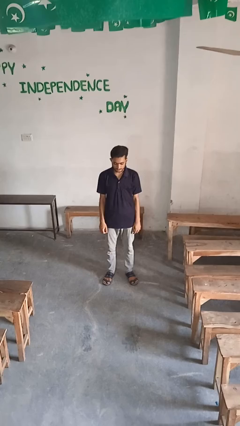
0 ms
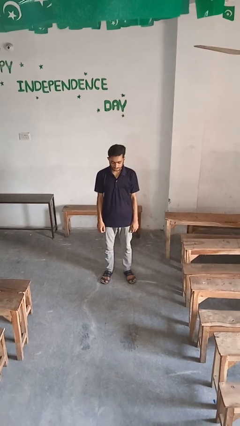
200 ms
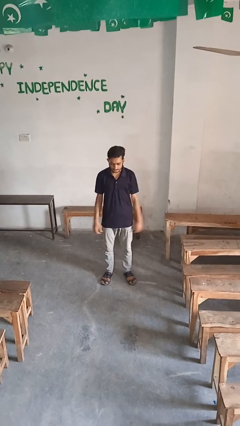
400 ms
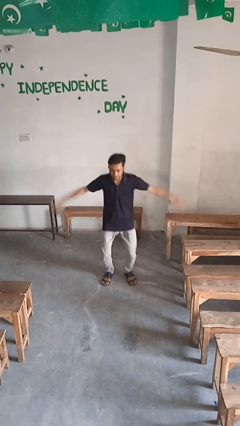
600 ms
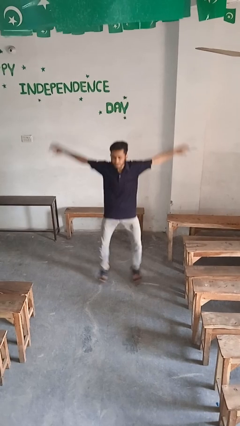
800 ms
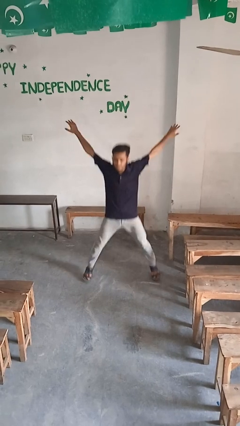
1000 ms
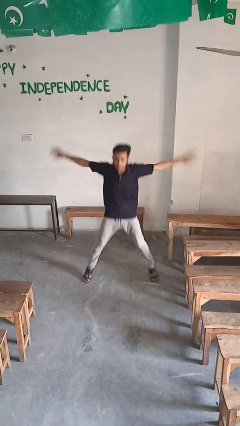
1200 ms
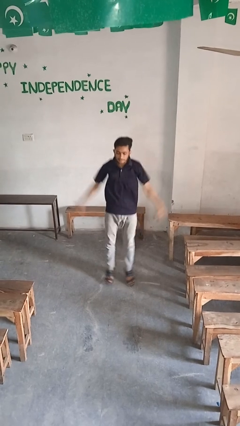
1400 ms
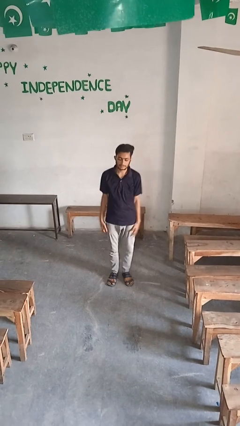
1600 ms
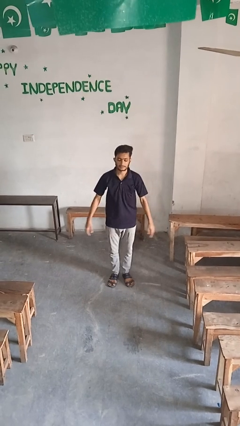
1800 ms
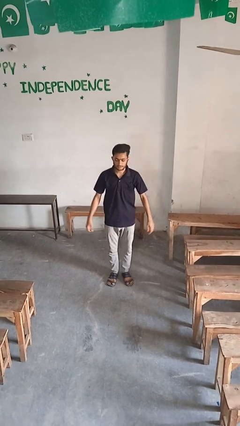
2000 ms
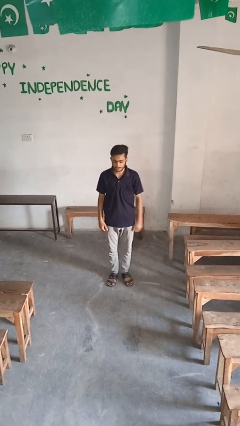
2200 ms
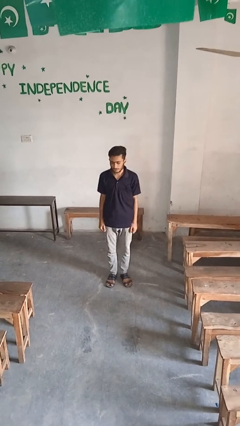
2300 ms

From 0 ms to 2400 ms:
person exercises with jumping jacks

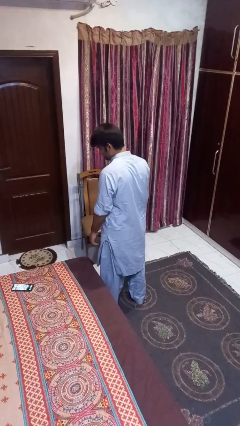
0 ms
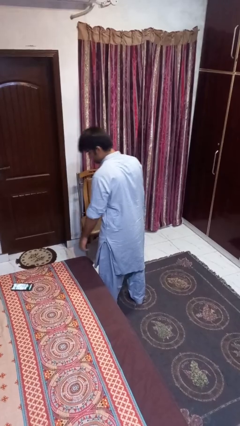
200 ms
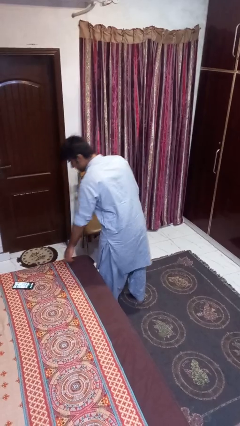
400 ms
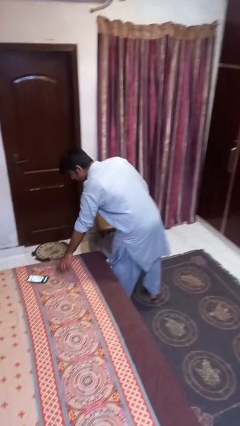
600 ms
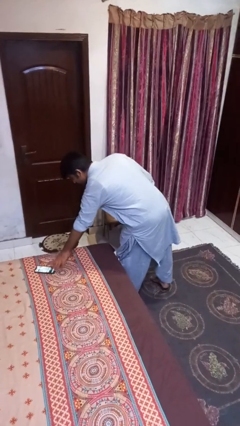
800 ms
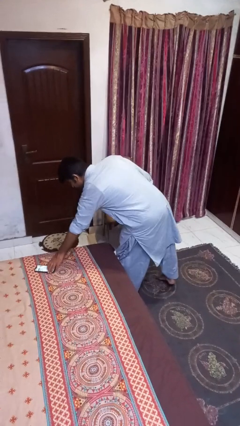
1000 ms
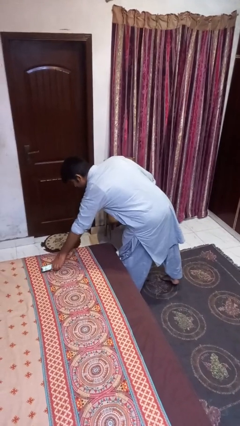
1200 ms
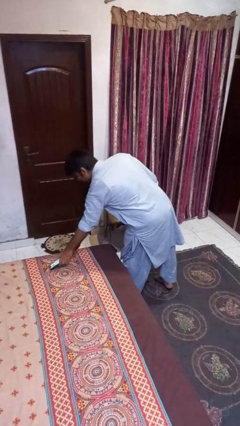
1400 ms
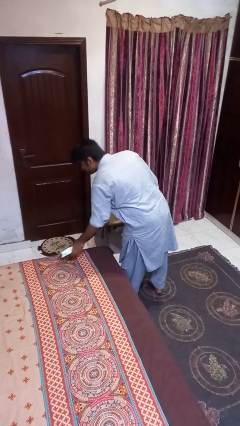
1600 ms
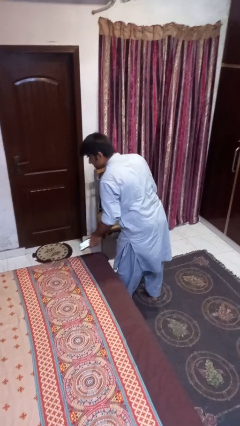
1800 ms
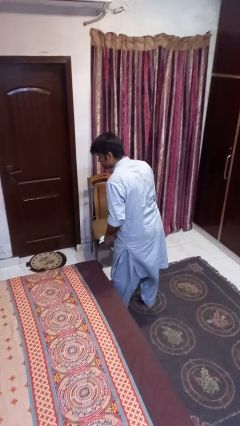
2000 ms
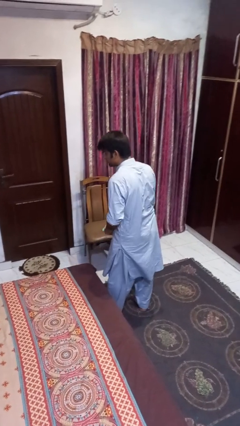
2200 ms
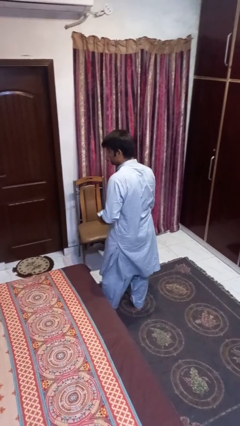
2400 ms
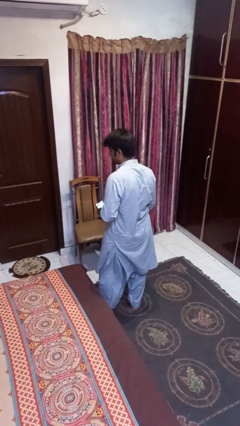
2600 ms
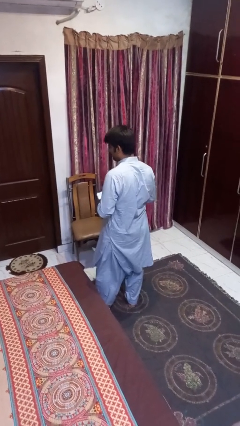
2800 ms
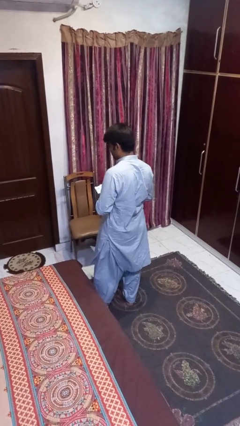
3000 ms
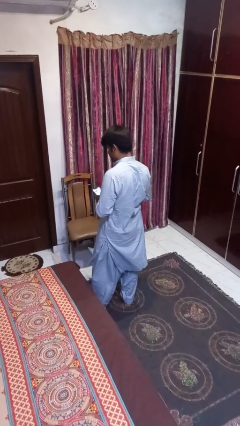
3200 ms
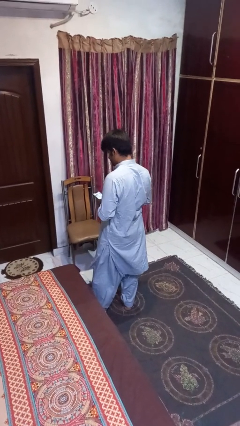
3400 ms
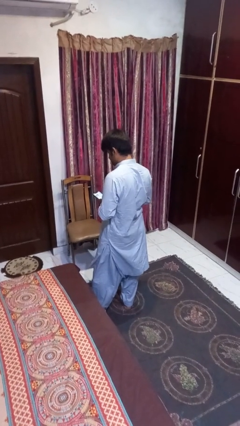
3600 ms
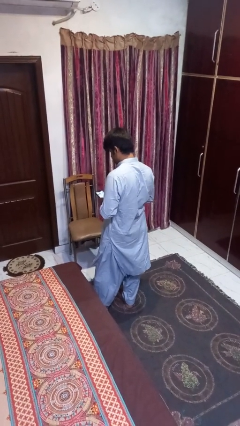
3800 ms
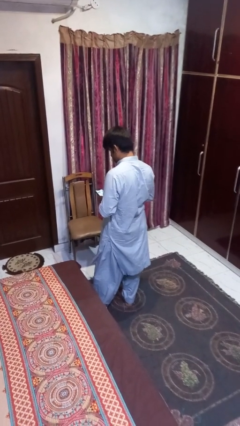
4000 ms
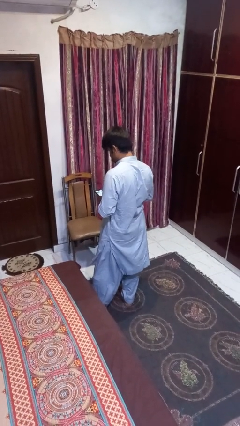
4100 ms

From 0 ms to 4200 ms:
person picks up object from bed

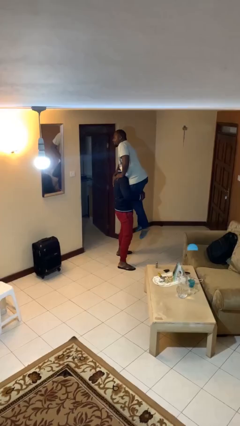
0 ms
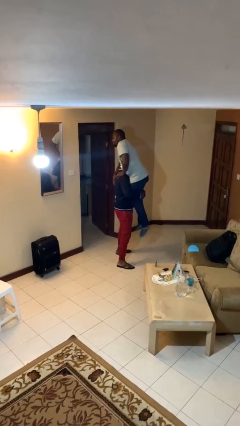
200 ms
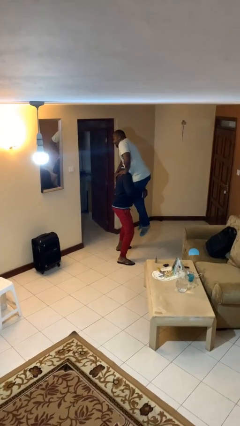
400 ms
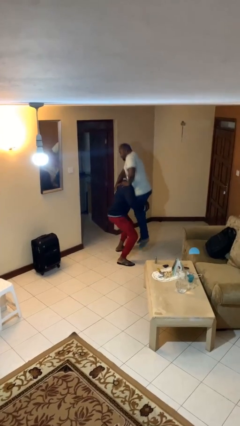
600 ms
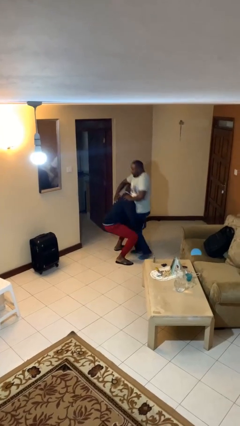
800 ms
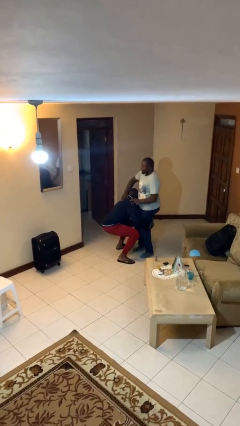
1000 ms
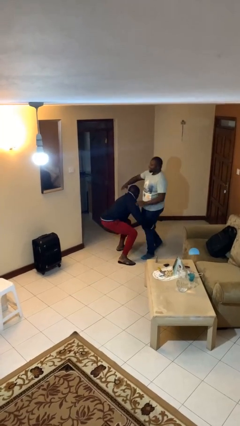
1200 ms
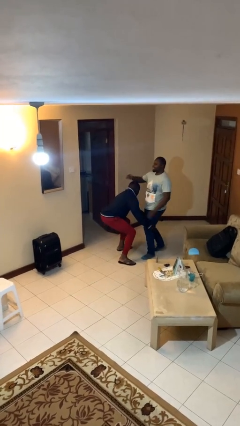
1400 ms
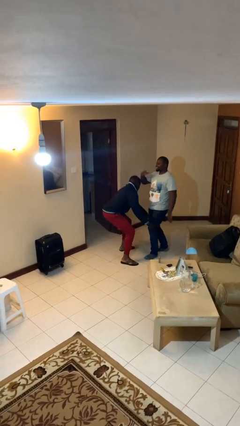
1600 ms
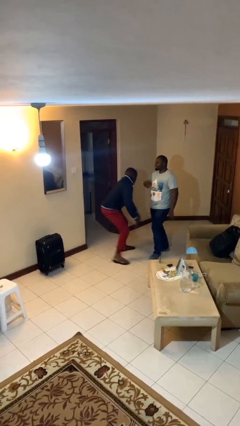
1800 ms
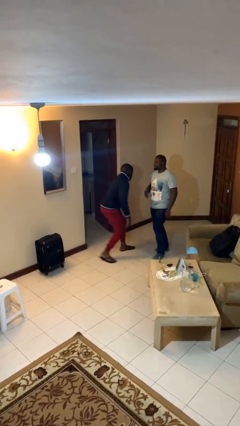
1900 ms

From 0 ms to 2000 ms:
person puts down person

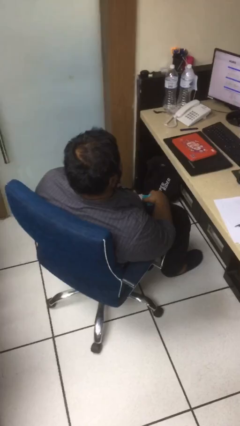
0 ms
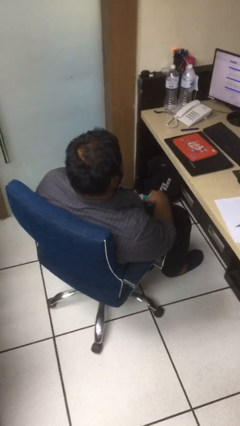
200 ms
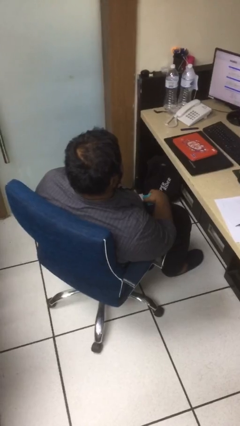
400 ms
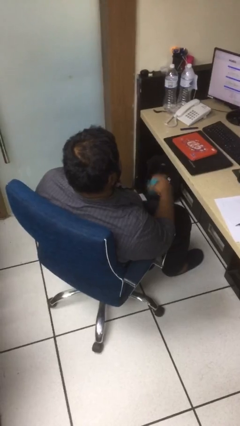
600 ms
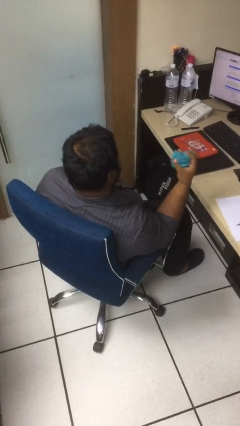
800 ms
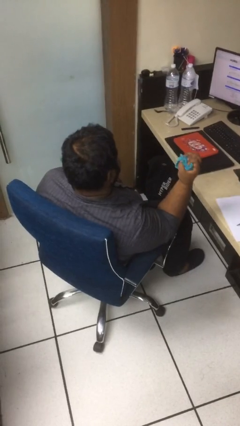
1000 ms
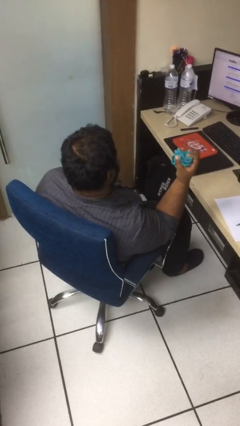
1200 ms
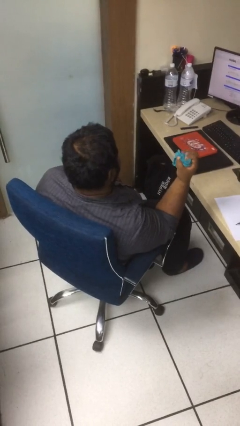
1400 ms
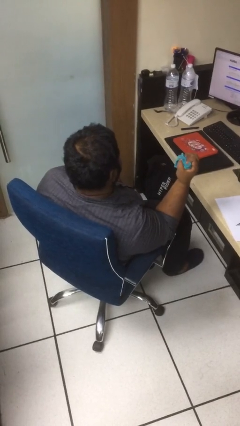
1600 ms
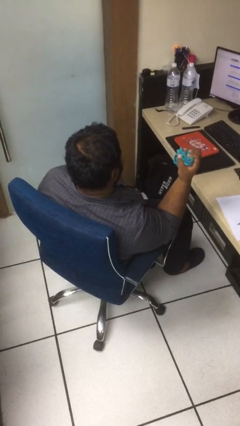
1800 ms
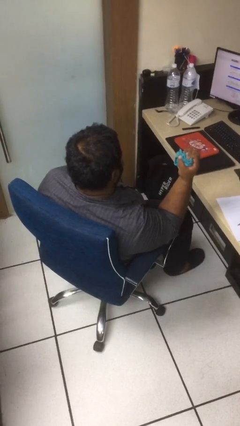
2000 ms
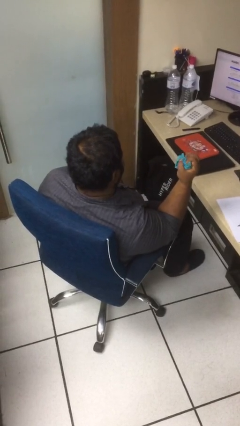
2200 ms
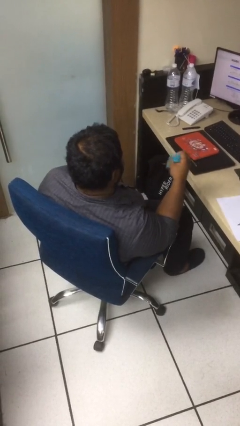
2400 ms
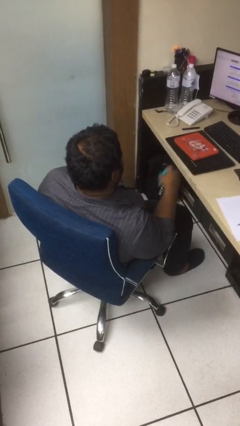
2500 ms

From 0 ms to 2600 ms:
person squeezes object

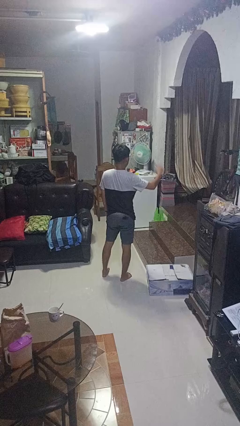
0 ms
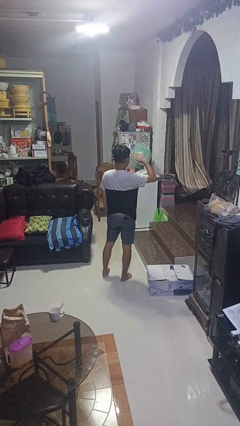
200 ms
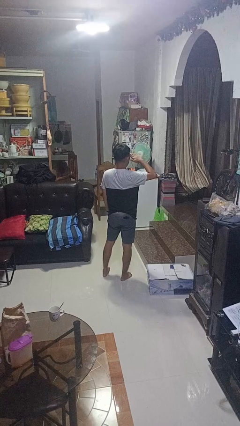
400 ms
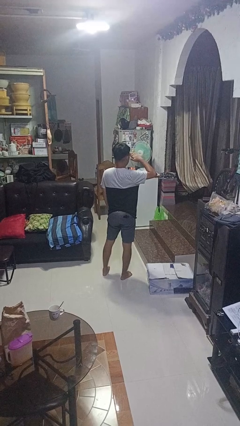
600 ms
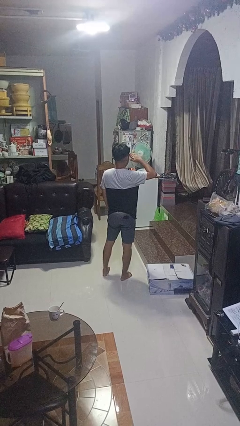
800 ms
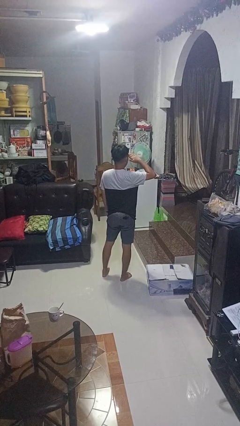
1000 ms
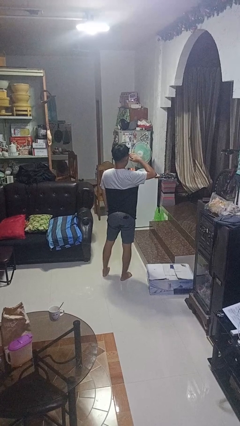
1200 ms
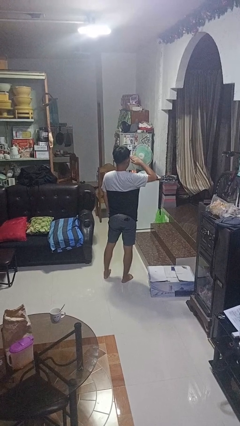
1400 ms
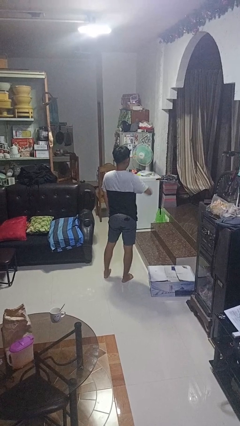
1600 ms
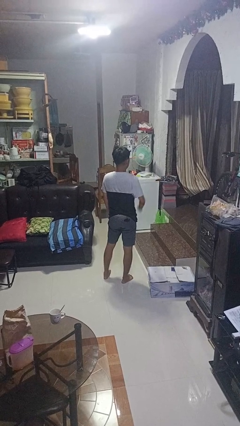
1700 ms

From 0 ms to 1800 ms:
person salutes

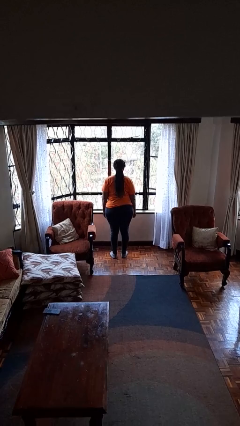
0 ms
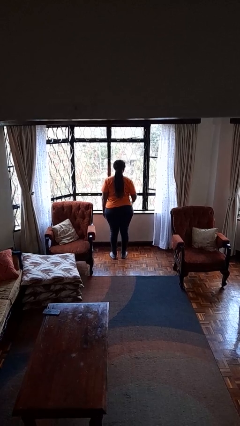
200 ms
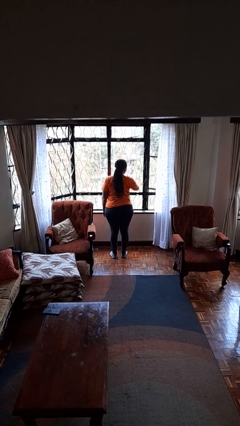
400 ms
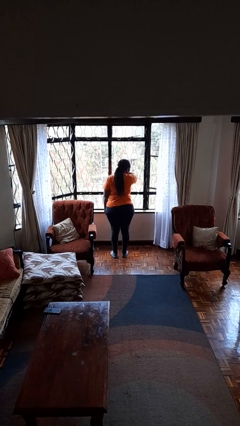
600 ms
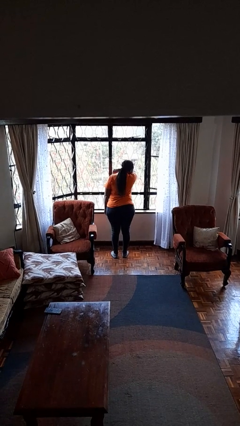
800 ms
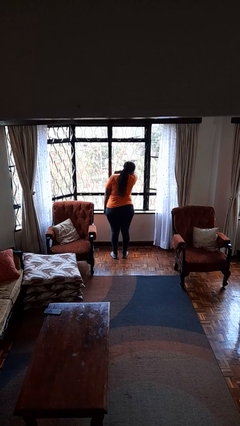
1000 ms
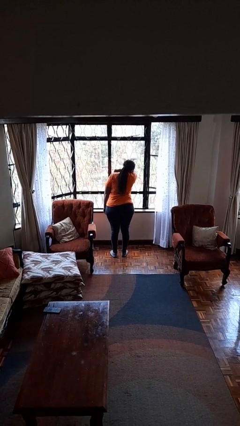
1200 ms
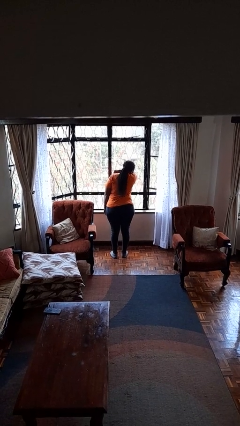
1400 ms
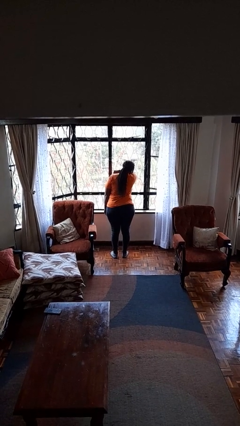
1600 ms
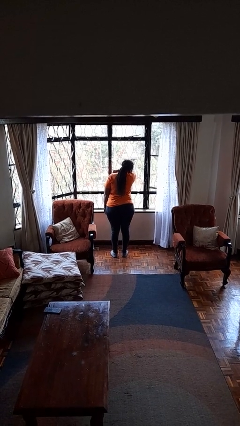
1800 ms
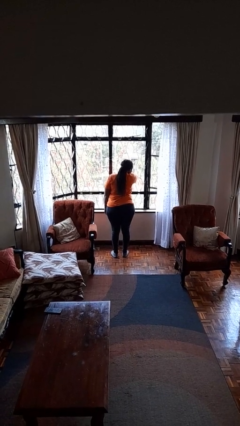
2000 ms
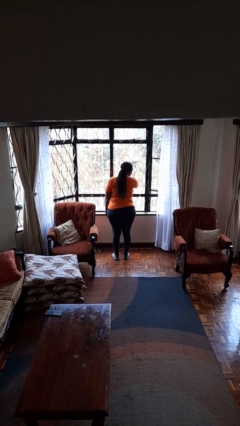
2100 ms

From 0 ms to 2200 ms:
person sneezes into arm

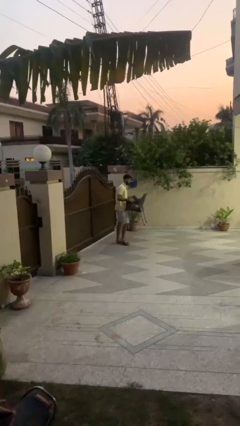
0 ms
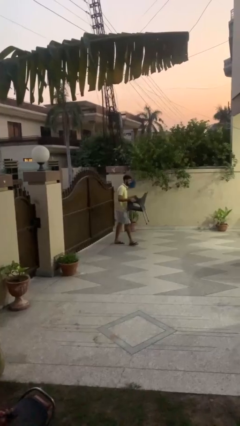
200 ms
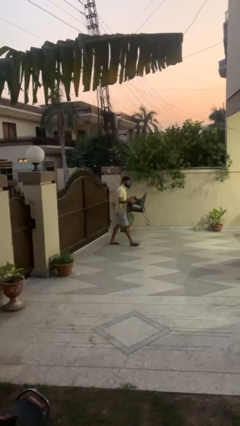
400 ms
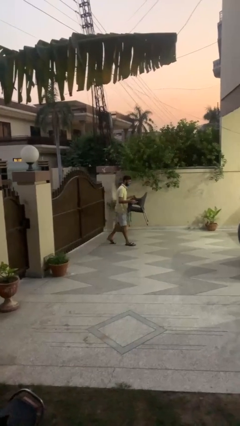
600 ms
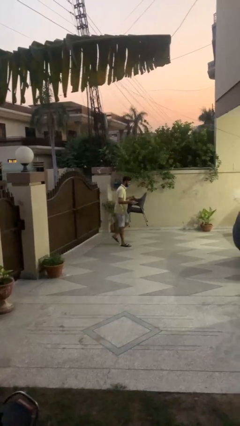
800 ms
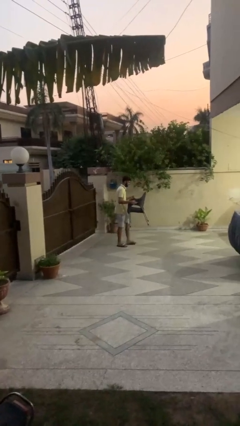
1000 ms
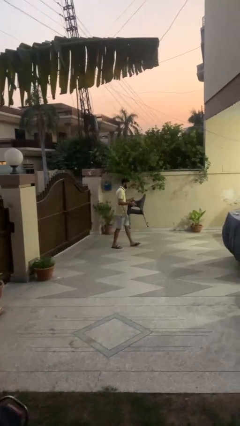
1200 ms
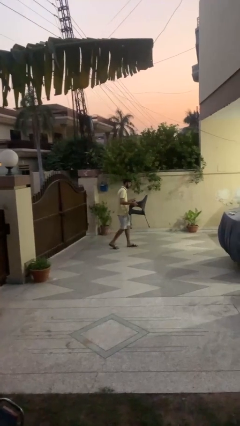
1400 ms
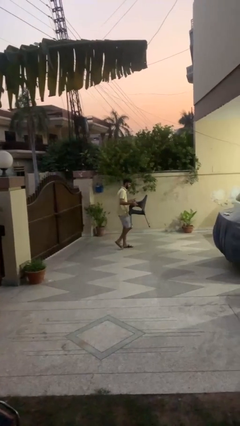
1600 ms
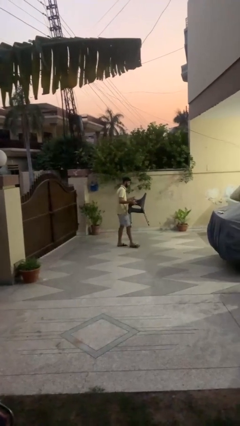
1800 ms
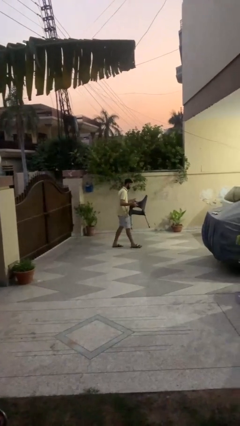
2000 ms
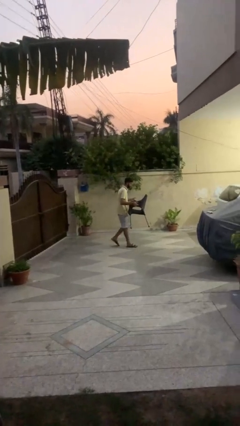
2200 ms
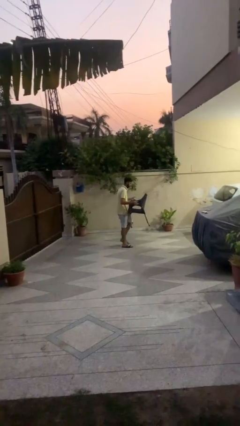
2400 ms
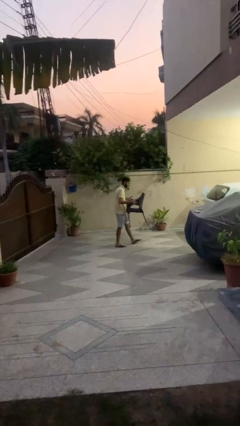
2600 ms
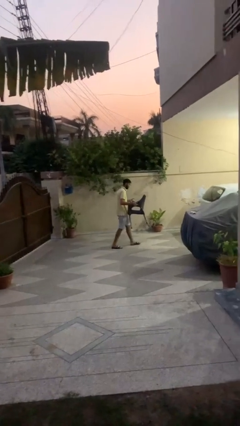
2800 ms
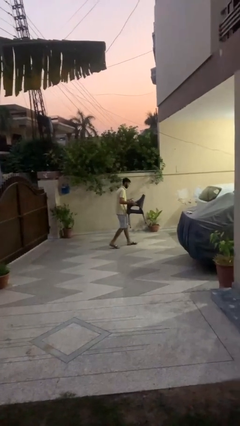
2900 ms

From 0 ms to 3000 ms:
person carries heavy object
